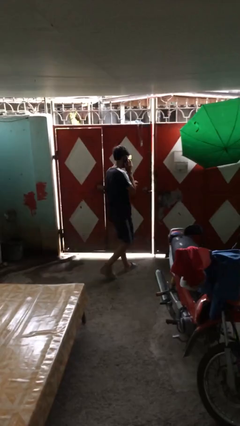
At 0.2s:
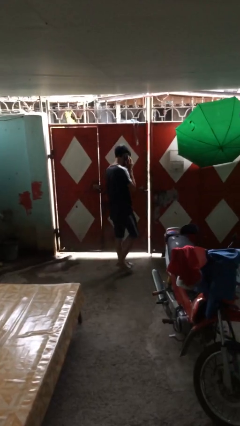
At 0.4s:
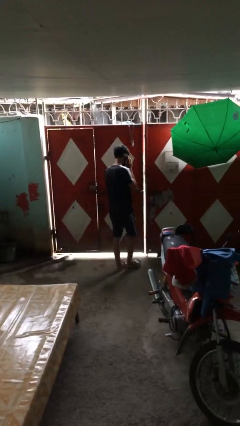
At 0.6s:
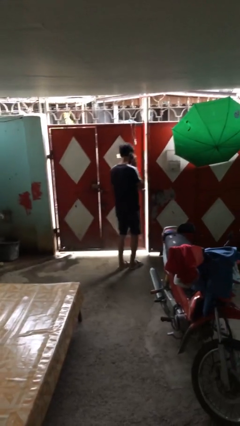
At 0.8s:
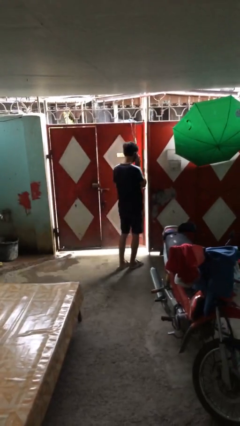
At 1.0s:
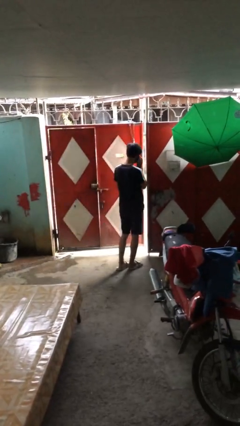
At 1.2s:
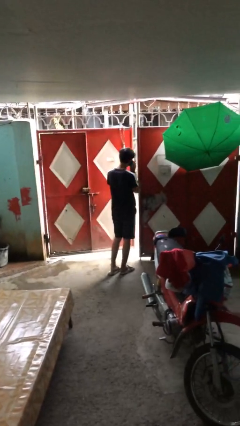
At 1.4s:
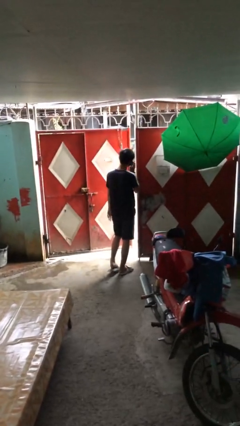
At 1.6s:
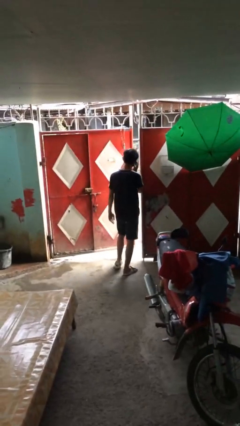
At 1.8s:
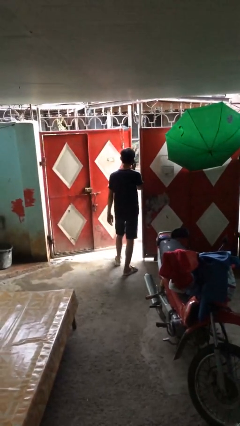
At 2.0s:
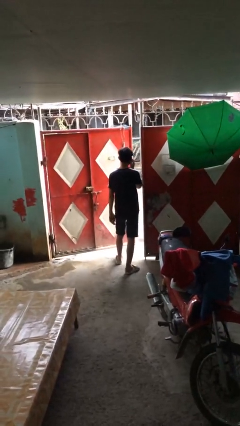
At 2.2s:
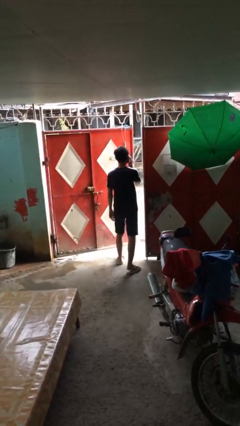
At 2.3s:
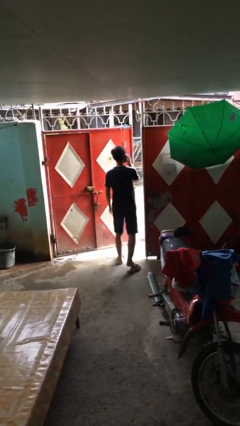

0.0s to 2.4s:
person opens facility door

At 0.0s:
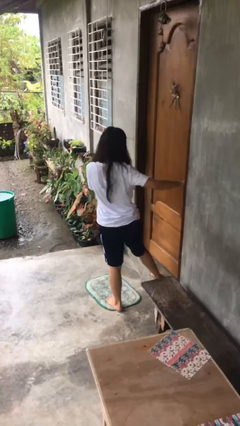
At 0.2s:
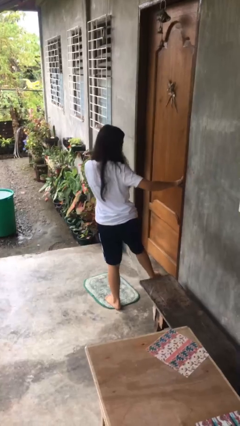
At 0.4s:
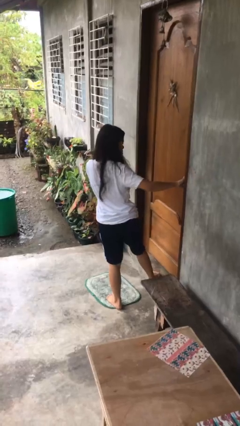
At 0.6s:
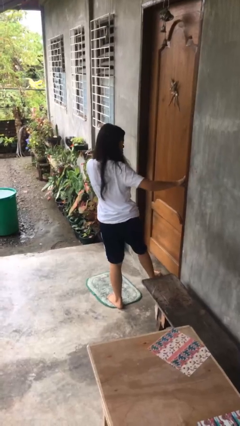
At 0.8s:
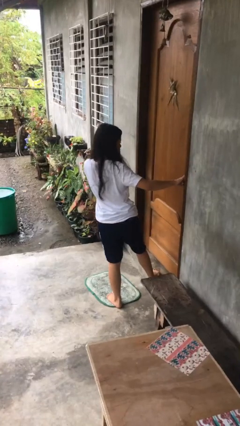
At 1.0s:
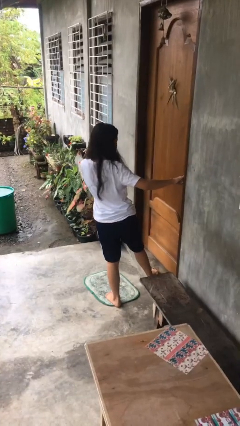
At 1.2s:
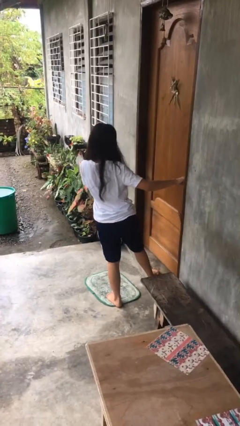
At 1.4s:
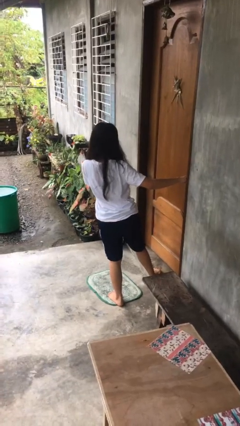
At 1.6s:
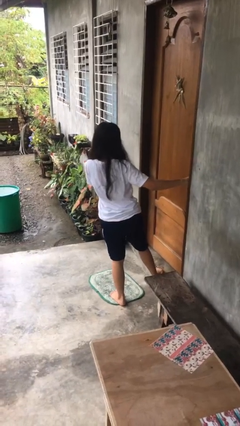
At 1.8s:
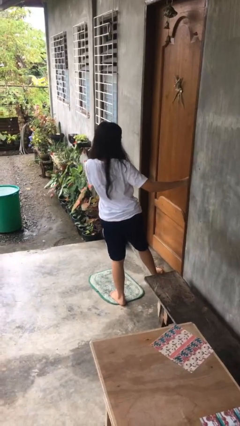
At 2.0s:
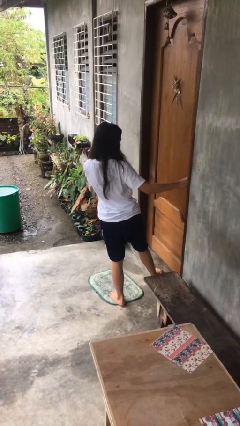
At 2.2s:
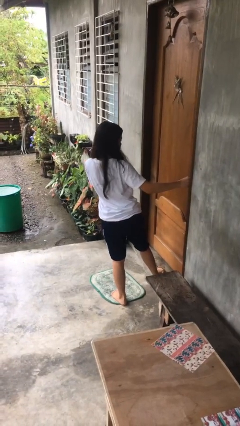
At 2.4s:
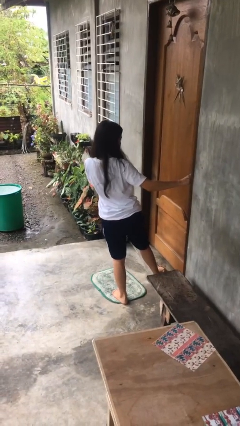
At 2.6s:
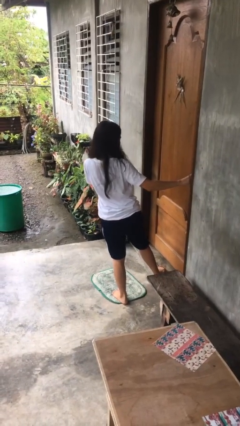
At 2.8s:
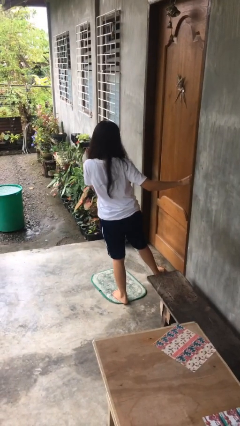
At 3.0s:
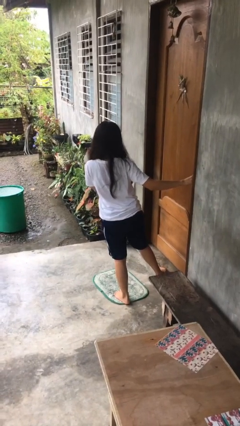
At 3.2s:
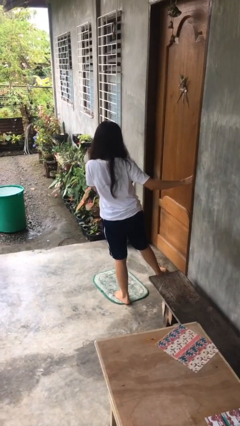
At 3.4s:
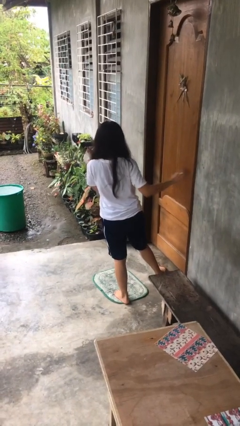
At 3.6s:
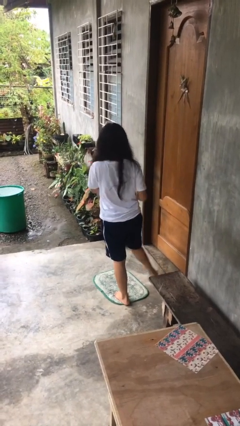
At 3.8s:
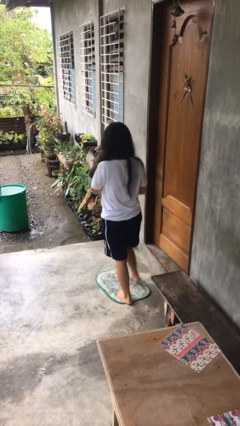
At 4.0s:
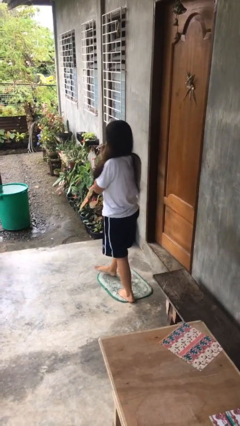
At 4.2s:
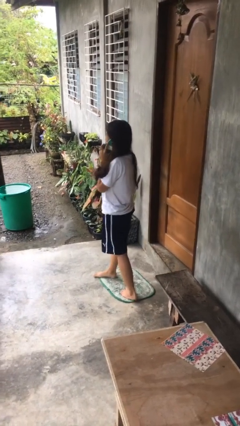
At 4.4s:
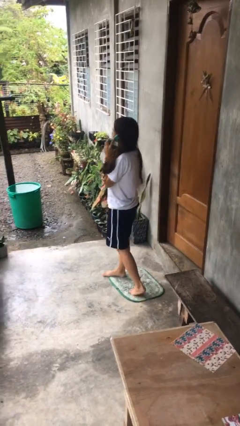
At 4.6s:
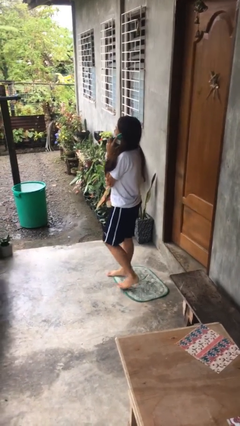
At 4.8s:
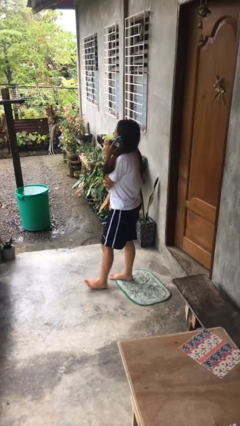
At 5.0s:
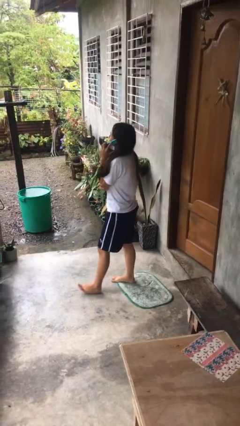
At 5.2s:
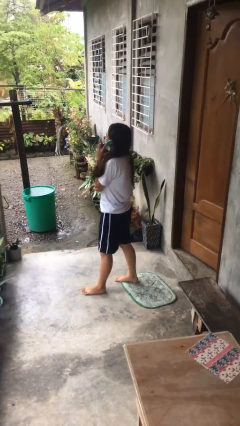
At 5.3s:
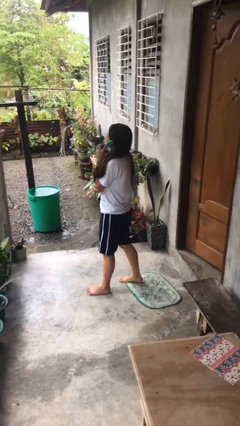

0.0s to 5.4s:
person closes facility door

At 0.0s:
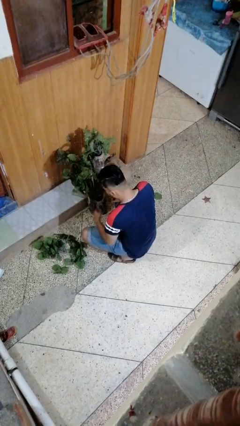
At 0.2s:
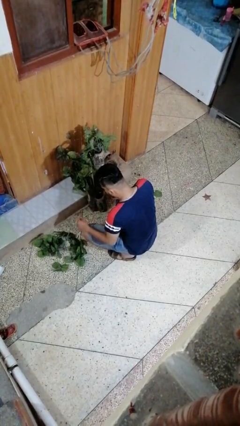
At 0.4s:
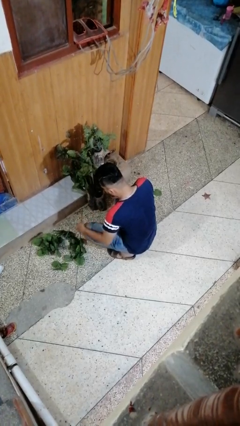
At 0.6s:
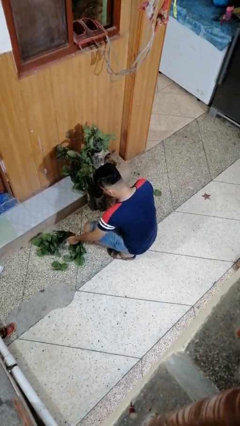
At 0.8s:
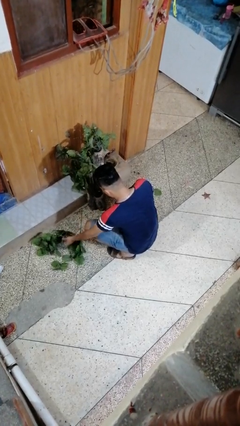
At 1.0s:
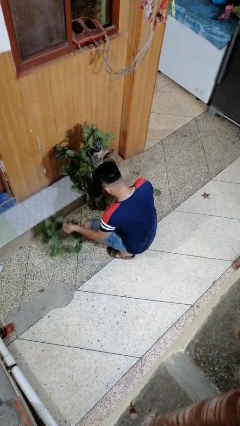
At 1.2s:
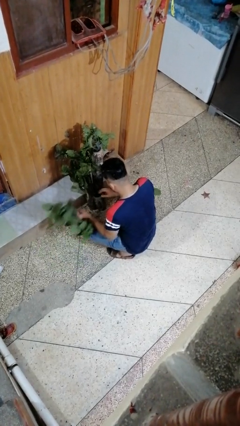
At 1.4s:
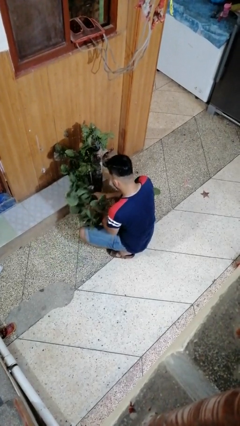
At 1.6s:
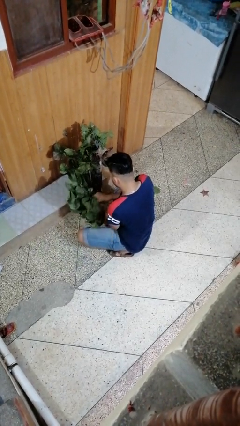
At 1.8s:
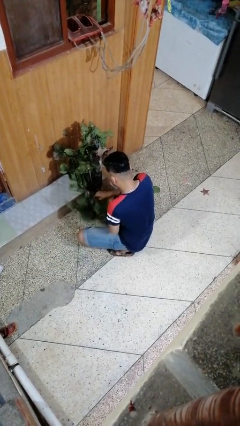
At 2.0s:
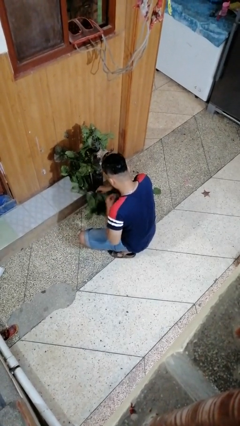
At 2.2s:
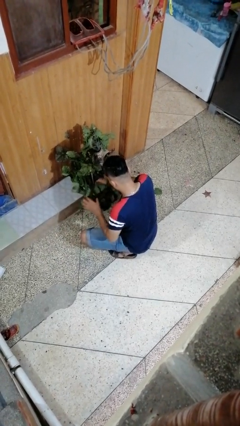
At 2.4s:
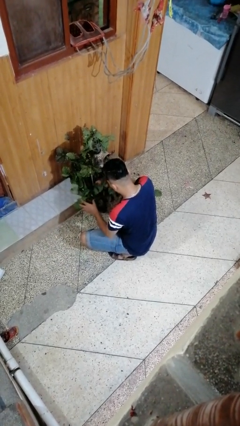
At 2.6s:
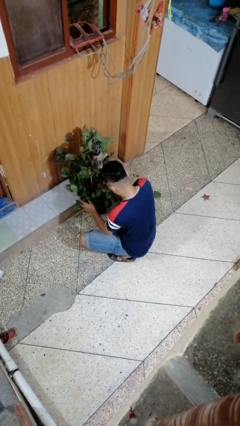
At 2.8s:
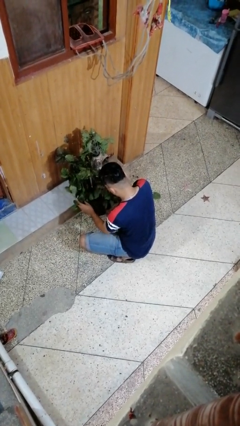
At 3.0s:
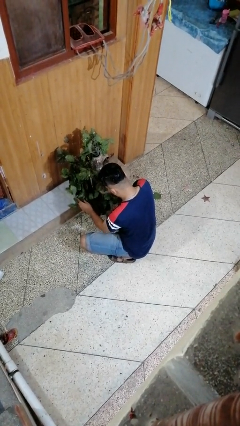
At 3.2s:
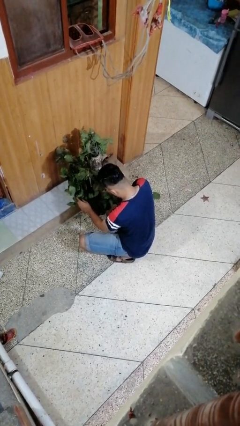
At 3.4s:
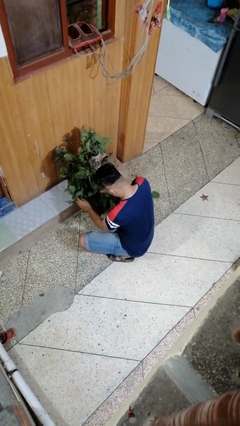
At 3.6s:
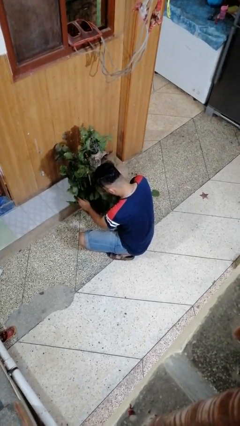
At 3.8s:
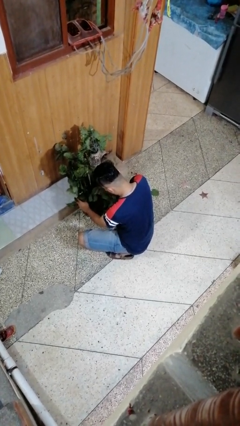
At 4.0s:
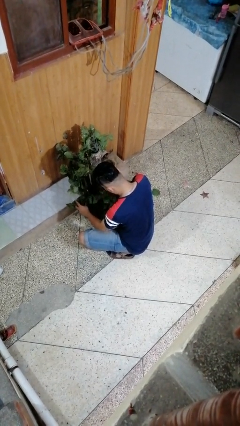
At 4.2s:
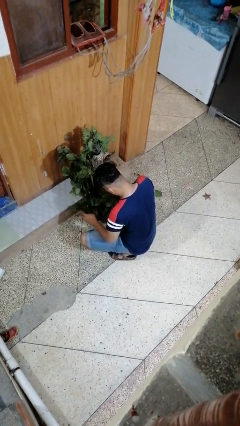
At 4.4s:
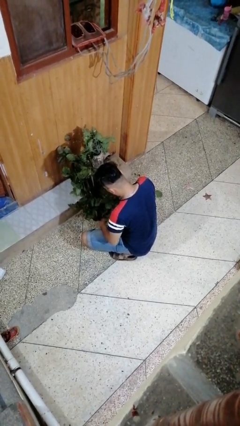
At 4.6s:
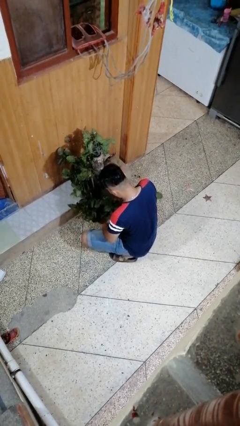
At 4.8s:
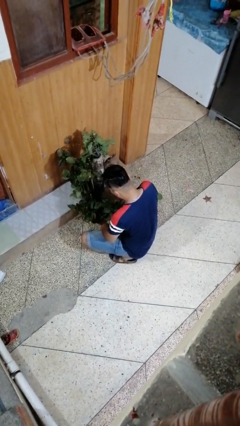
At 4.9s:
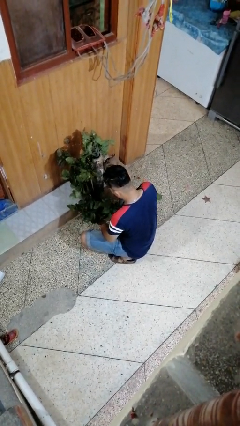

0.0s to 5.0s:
person arranges flowers in vase

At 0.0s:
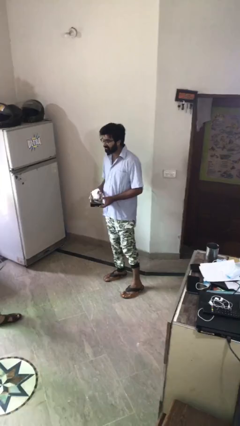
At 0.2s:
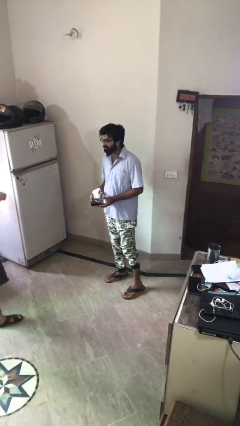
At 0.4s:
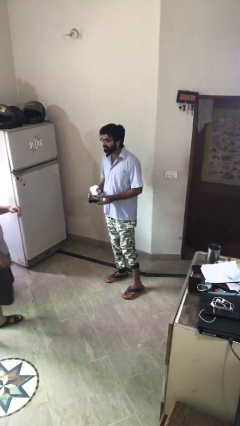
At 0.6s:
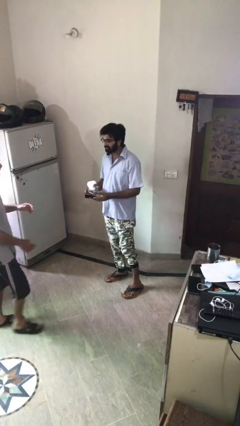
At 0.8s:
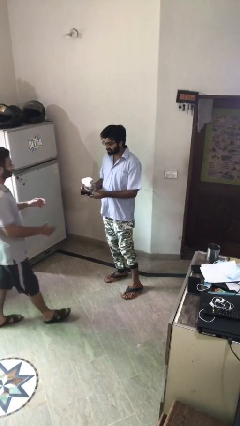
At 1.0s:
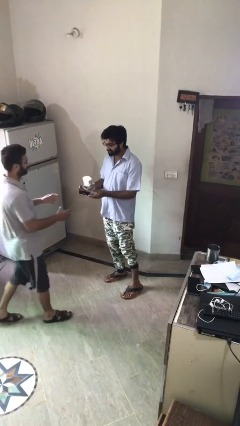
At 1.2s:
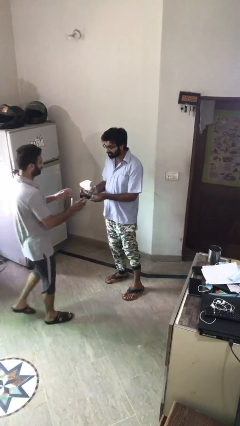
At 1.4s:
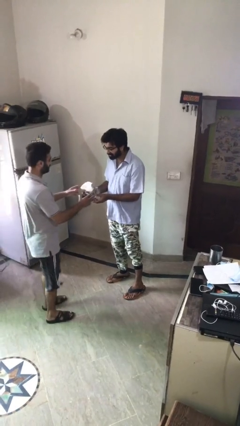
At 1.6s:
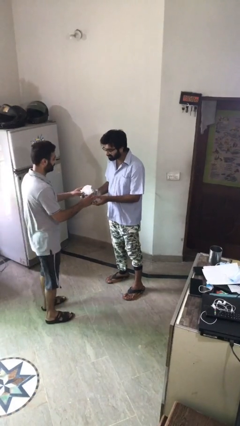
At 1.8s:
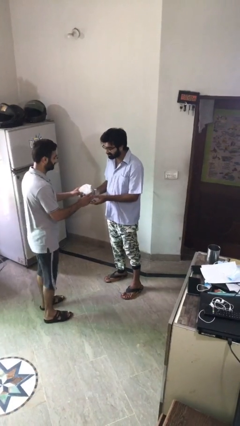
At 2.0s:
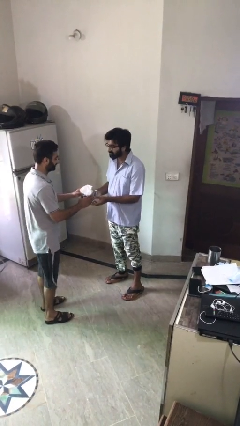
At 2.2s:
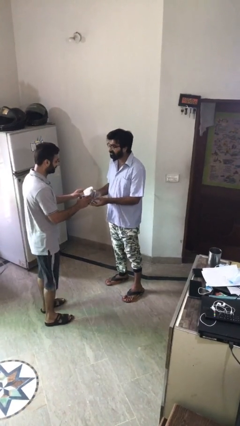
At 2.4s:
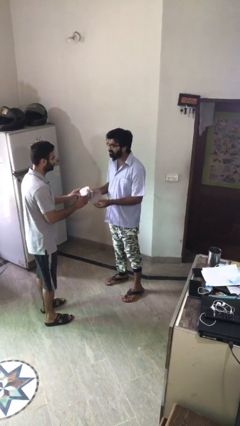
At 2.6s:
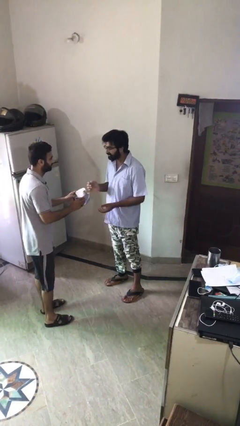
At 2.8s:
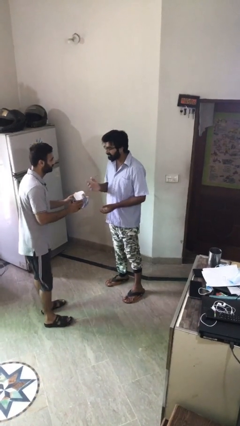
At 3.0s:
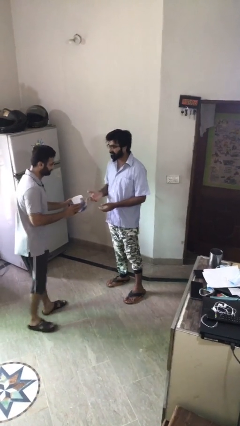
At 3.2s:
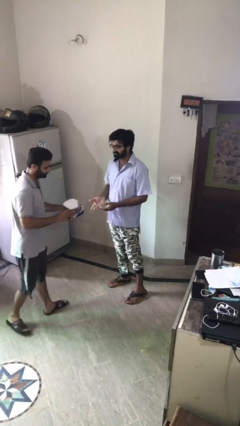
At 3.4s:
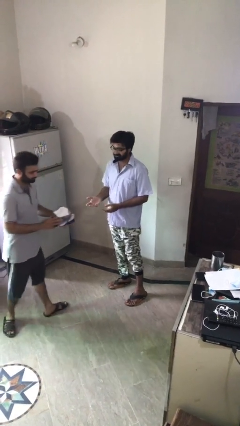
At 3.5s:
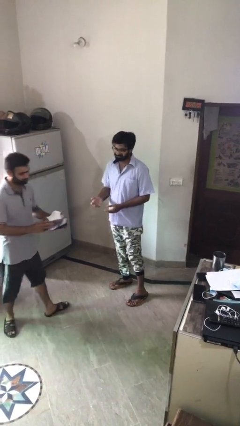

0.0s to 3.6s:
person transfers object to person

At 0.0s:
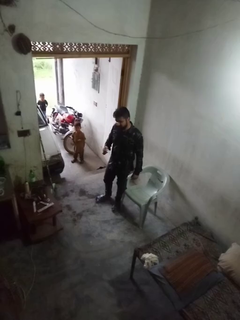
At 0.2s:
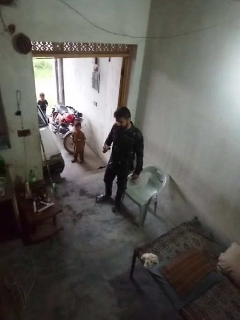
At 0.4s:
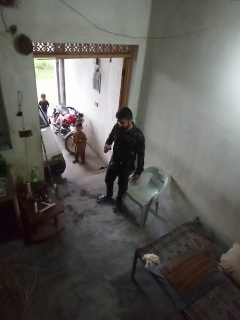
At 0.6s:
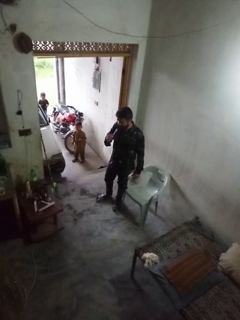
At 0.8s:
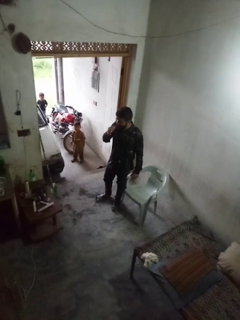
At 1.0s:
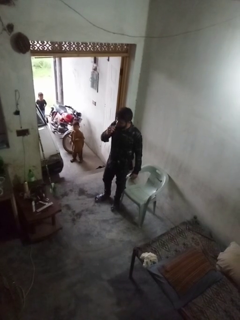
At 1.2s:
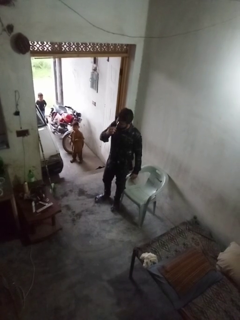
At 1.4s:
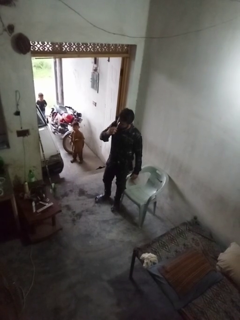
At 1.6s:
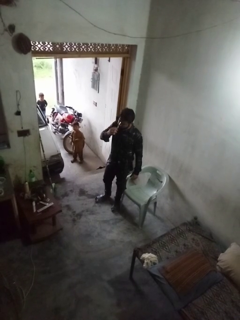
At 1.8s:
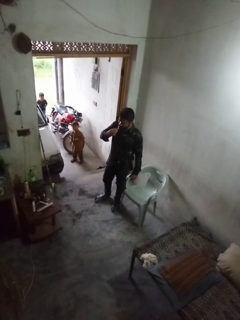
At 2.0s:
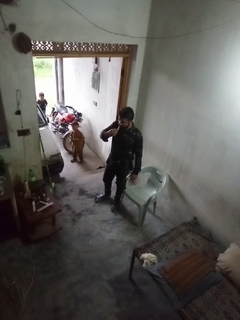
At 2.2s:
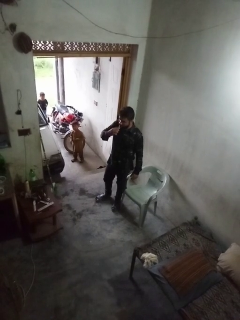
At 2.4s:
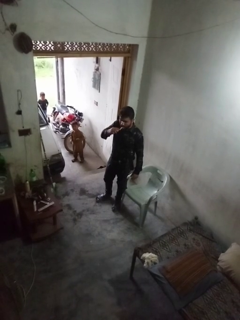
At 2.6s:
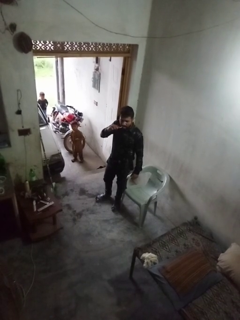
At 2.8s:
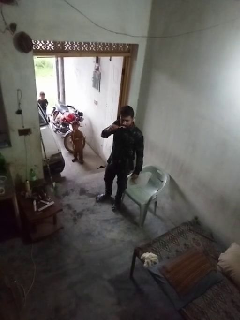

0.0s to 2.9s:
person brushes teeth
